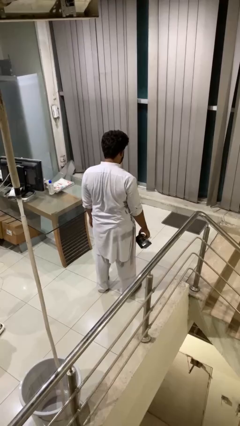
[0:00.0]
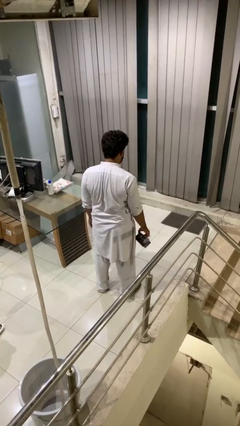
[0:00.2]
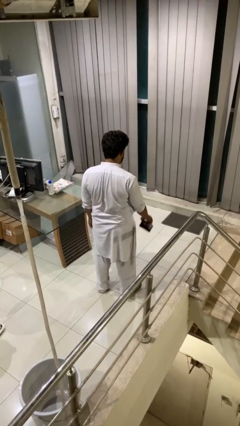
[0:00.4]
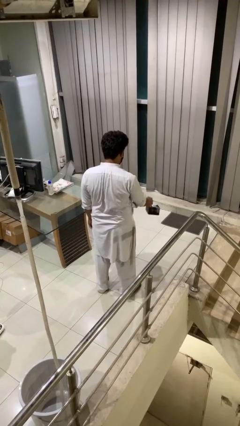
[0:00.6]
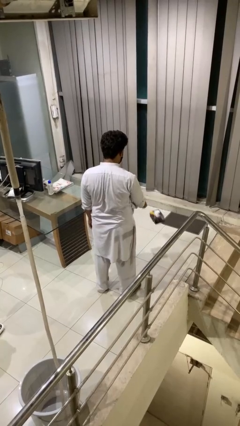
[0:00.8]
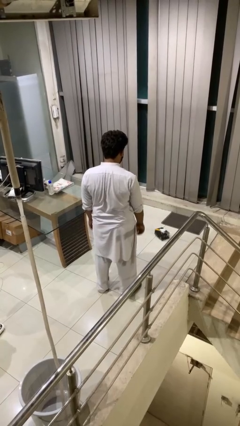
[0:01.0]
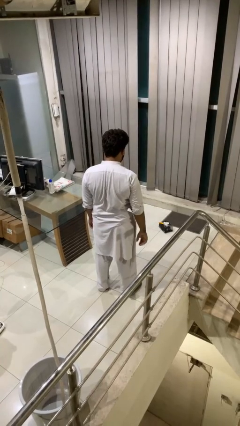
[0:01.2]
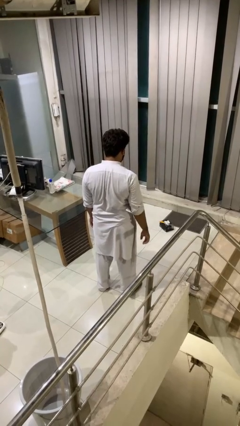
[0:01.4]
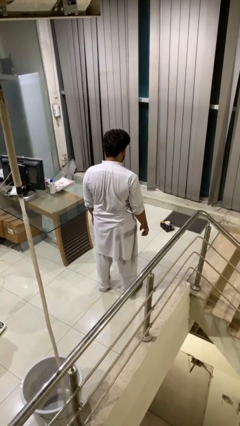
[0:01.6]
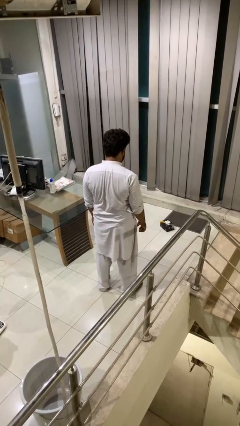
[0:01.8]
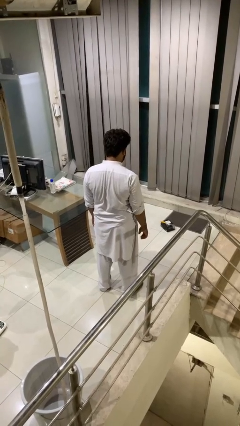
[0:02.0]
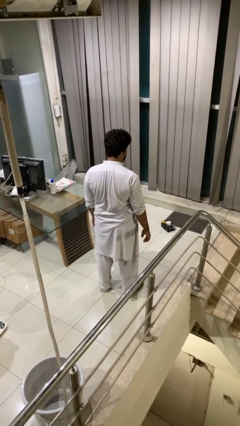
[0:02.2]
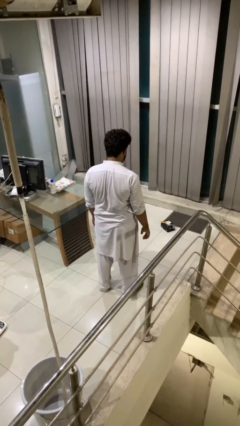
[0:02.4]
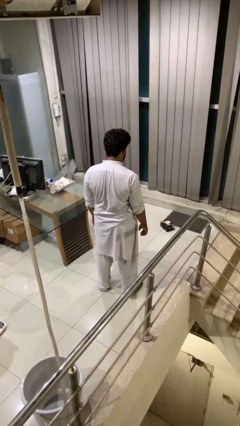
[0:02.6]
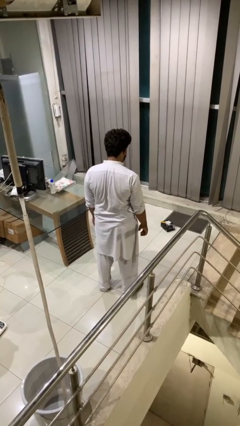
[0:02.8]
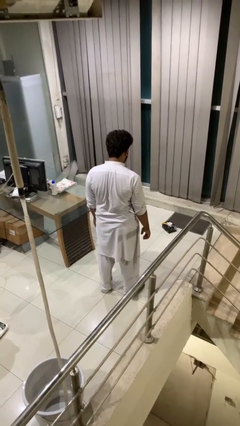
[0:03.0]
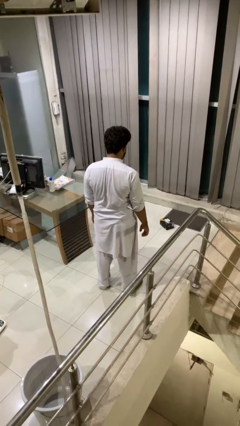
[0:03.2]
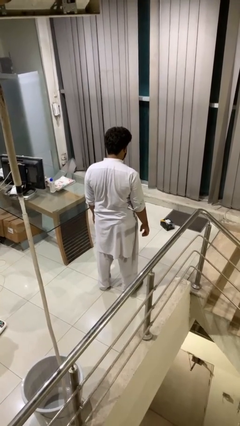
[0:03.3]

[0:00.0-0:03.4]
person throws object to ground

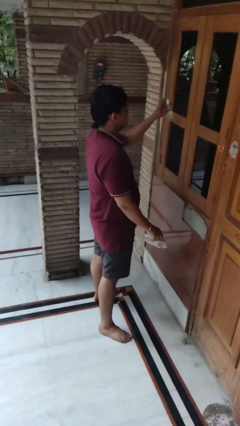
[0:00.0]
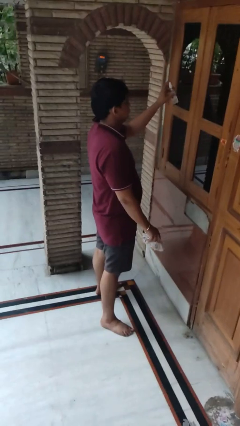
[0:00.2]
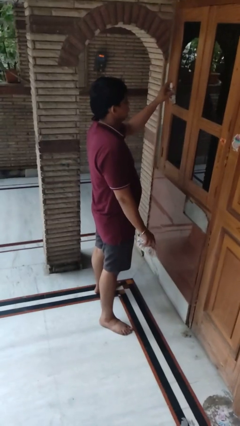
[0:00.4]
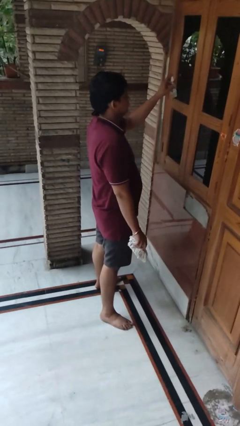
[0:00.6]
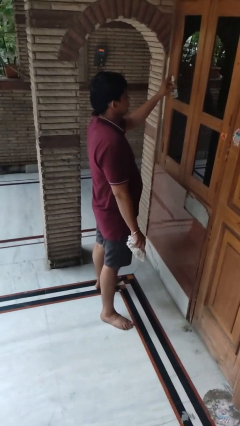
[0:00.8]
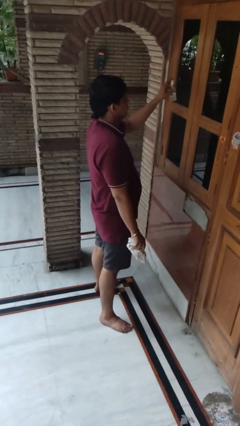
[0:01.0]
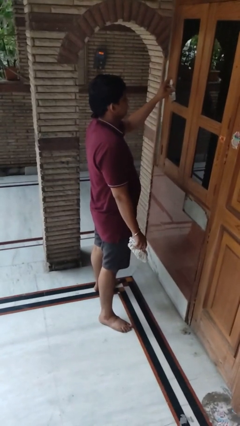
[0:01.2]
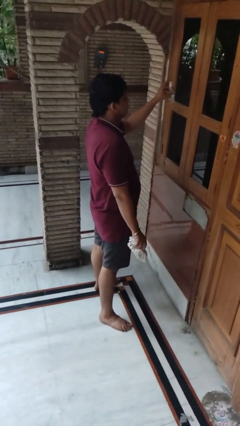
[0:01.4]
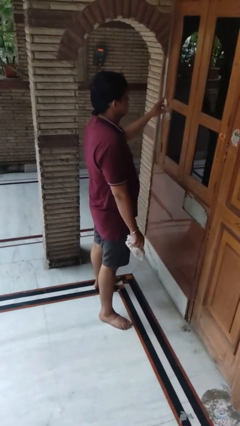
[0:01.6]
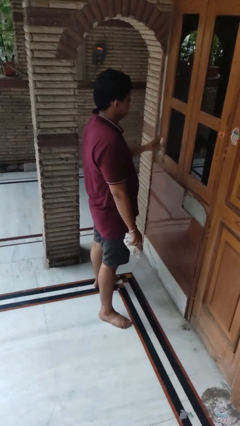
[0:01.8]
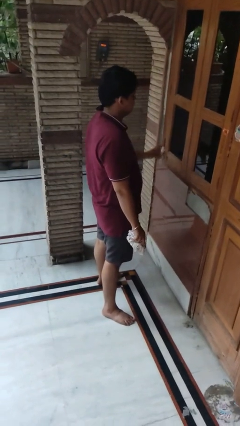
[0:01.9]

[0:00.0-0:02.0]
person sprays from bottle

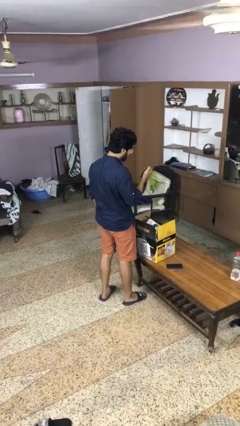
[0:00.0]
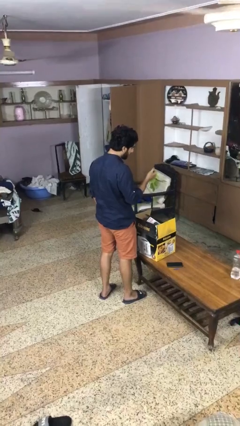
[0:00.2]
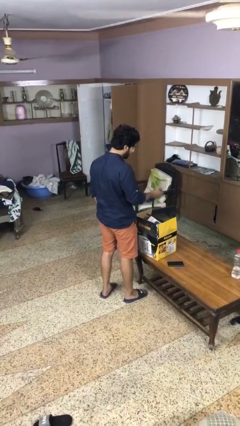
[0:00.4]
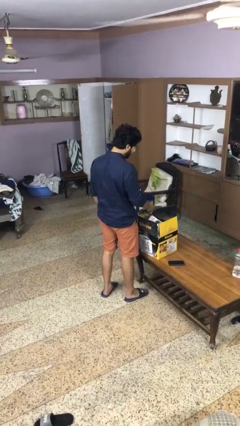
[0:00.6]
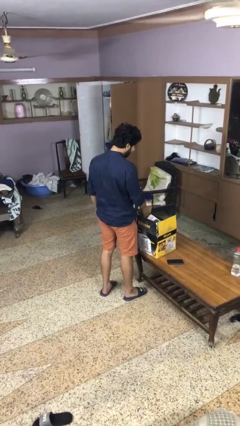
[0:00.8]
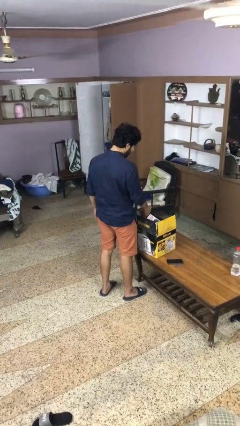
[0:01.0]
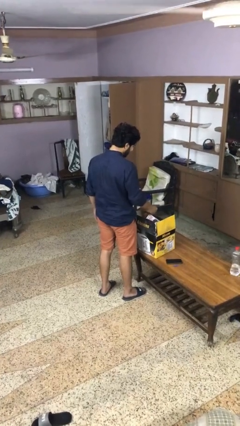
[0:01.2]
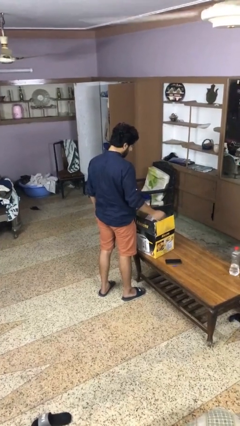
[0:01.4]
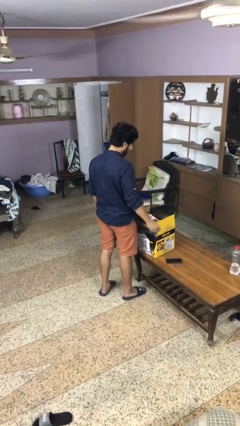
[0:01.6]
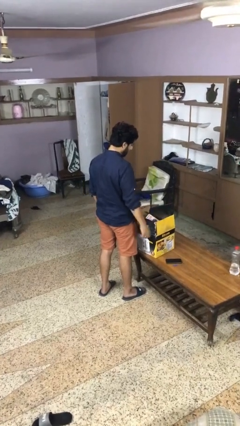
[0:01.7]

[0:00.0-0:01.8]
person puts object into box

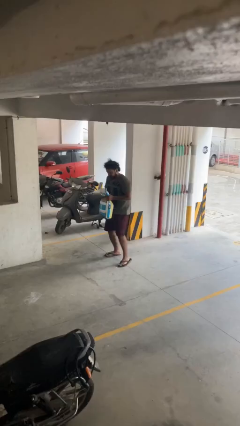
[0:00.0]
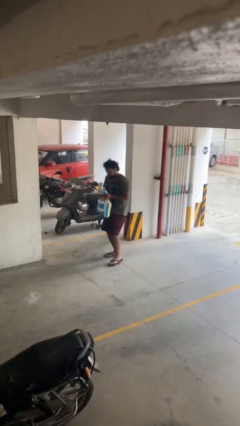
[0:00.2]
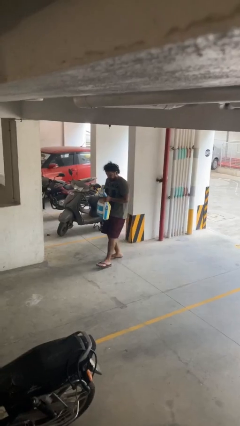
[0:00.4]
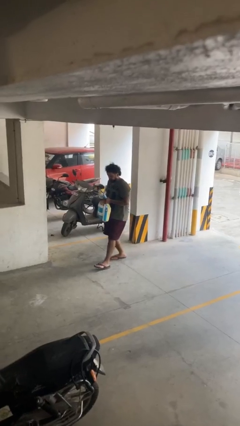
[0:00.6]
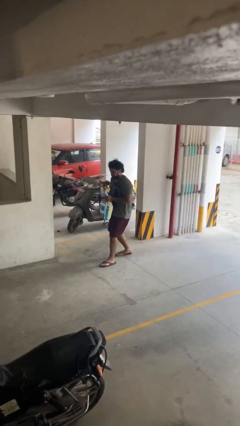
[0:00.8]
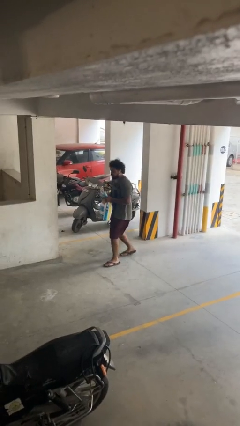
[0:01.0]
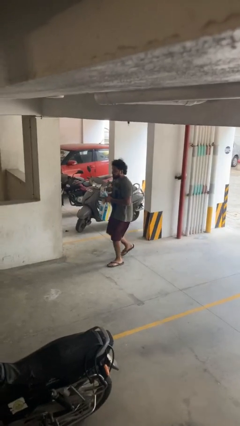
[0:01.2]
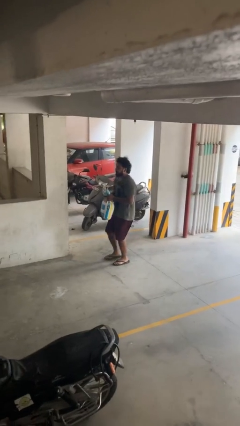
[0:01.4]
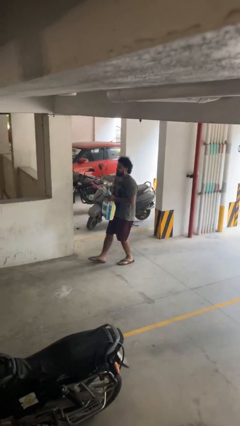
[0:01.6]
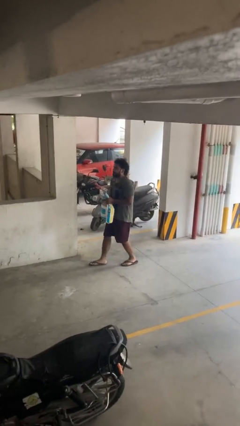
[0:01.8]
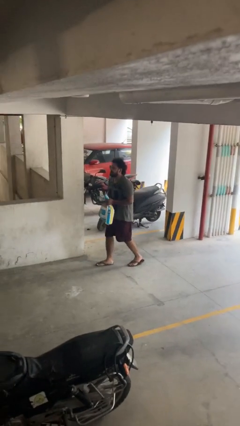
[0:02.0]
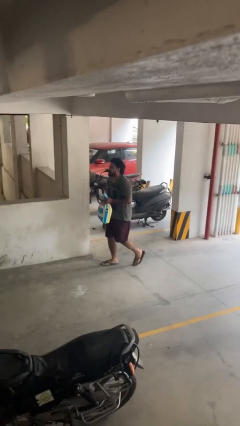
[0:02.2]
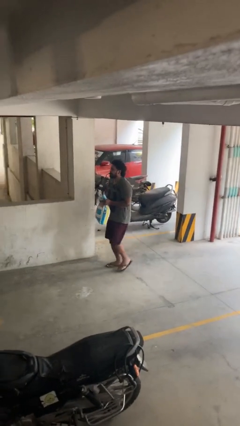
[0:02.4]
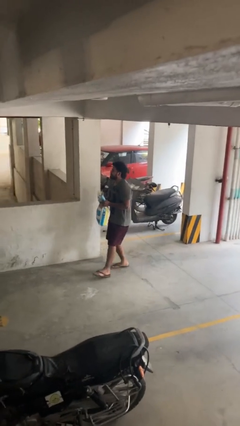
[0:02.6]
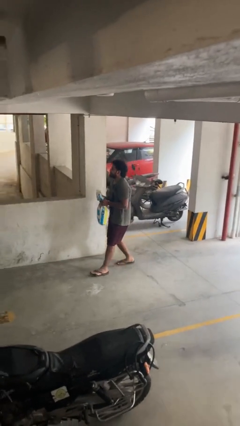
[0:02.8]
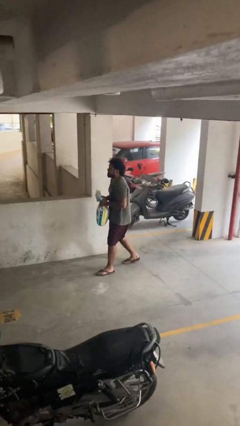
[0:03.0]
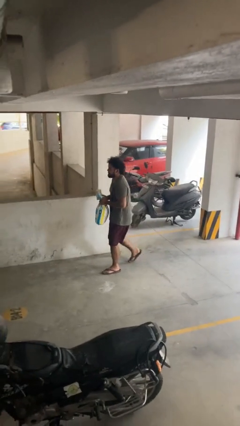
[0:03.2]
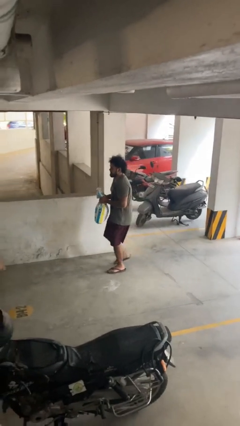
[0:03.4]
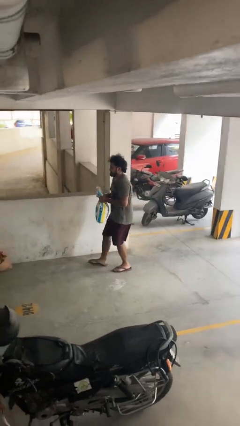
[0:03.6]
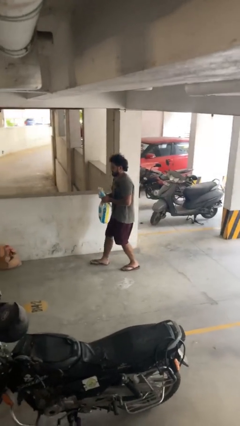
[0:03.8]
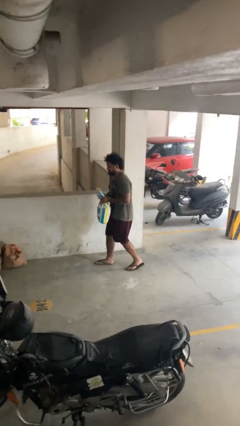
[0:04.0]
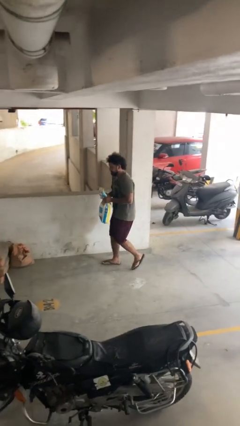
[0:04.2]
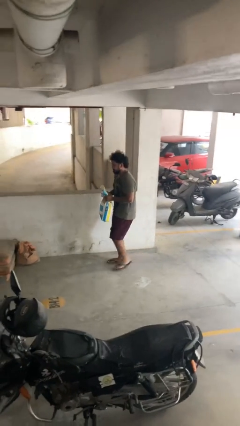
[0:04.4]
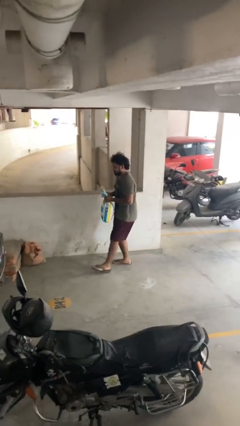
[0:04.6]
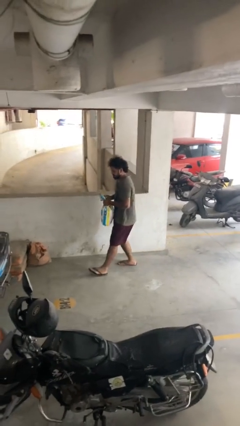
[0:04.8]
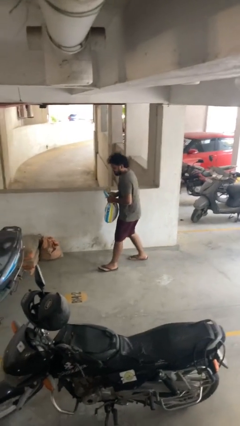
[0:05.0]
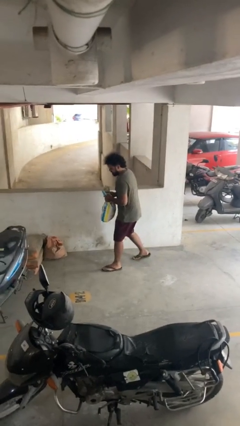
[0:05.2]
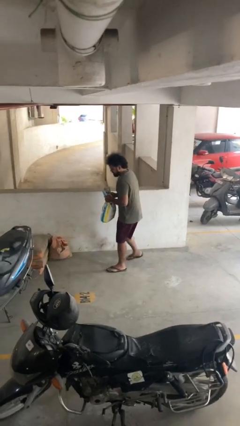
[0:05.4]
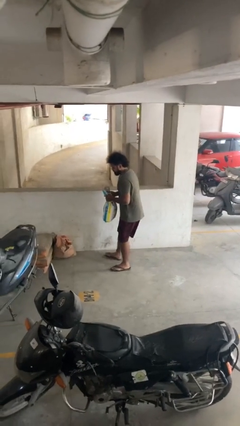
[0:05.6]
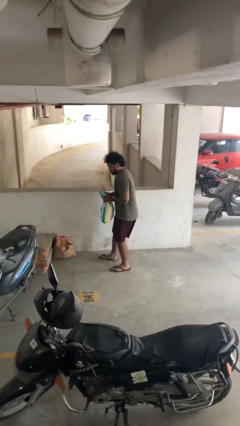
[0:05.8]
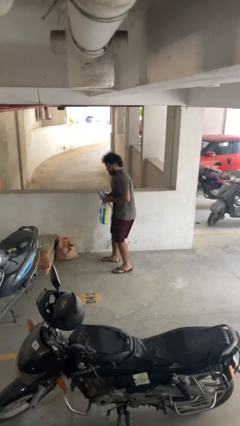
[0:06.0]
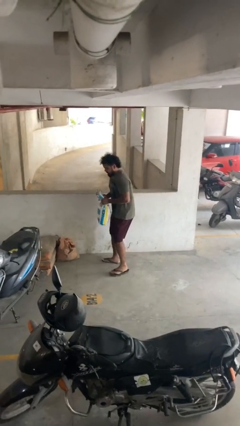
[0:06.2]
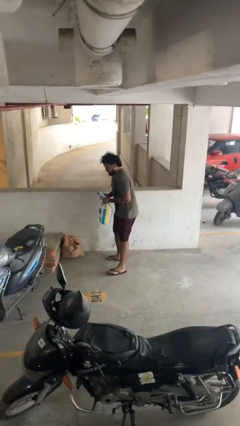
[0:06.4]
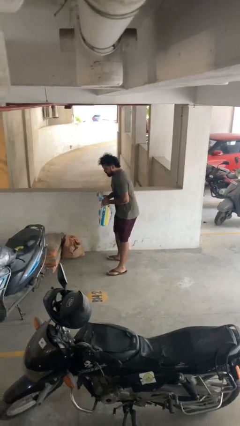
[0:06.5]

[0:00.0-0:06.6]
person carries heavy object

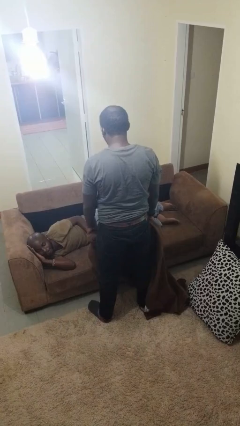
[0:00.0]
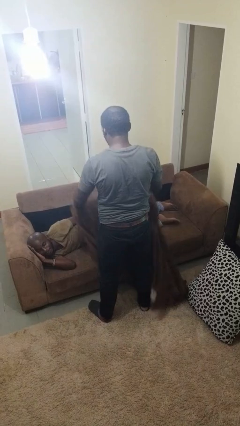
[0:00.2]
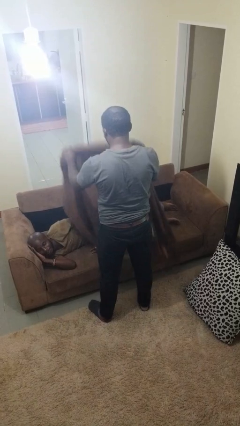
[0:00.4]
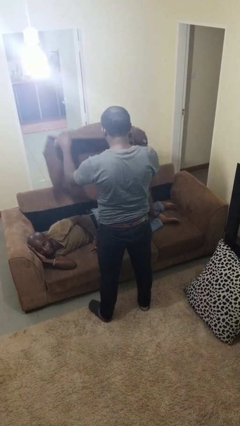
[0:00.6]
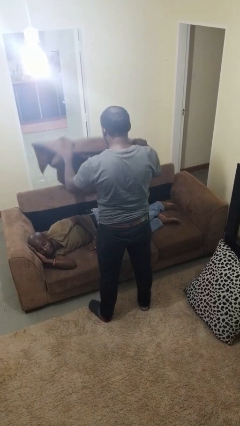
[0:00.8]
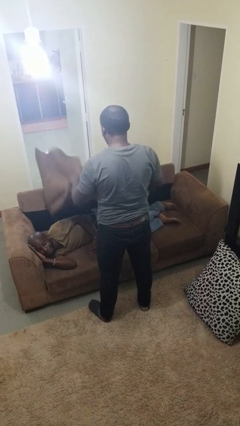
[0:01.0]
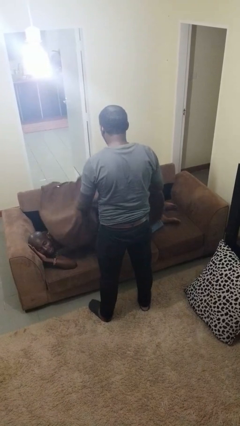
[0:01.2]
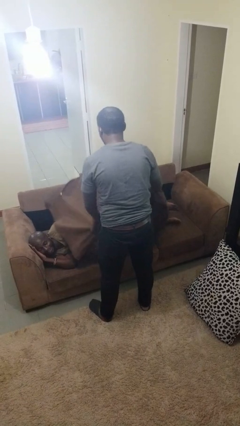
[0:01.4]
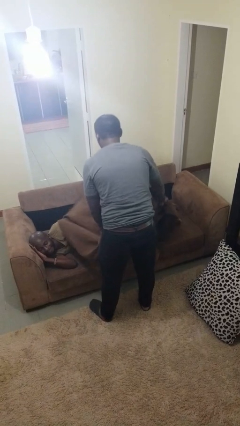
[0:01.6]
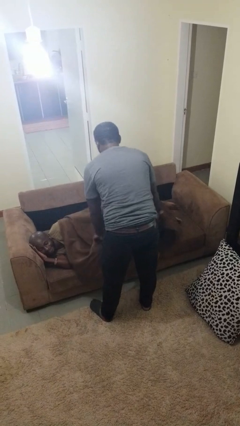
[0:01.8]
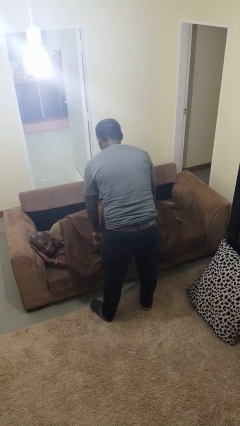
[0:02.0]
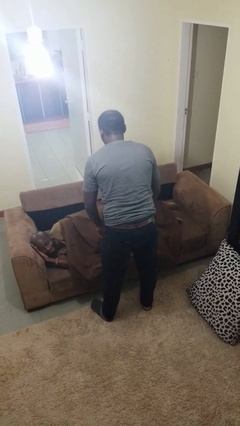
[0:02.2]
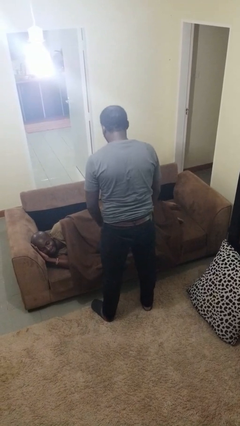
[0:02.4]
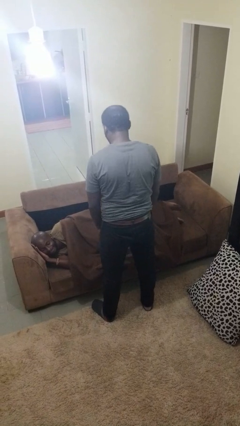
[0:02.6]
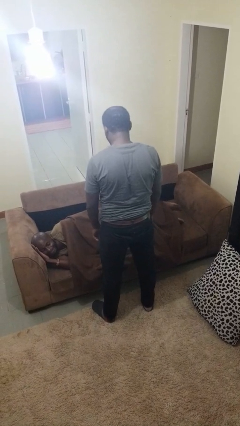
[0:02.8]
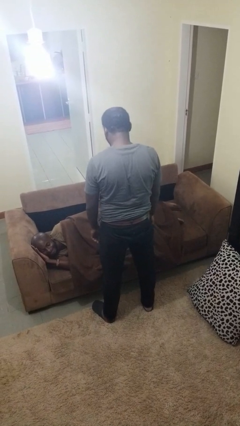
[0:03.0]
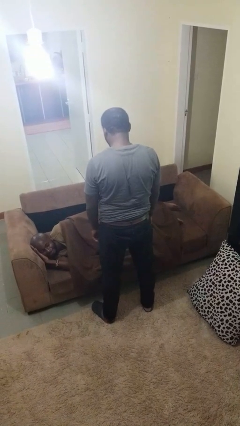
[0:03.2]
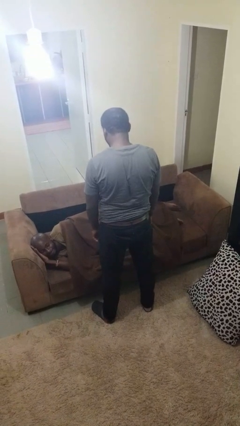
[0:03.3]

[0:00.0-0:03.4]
person covers friend with blanket

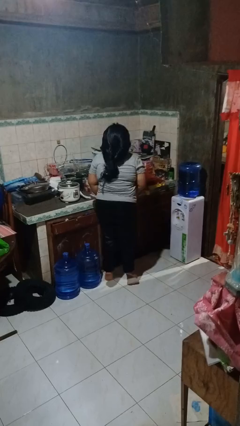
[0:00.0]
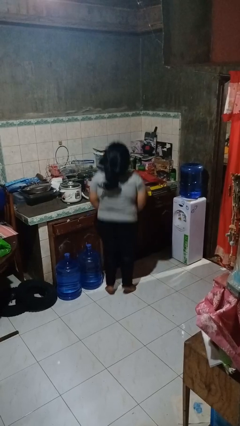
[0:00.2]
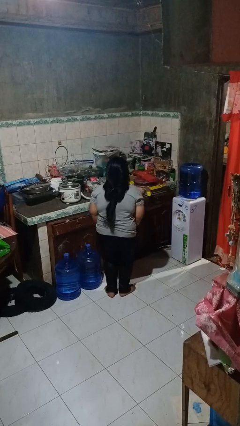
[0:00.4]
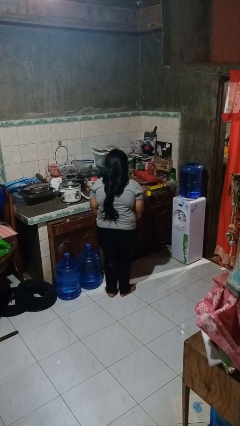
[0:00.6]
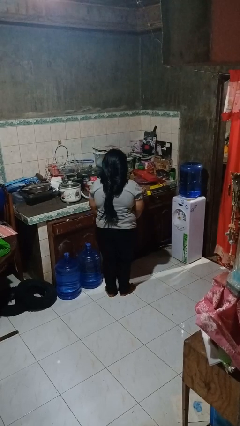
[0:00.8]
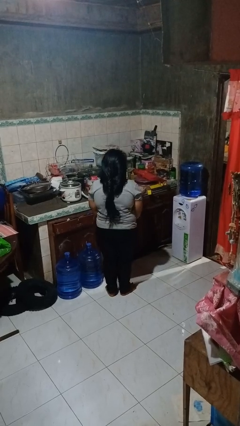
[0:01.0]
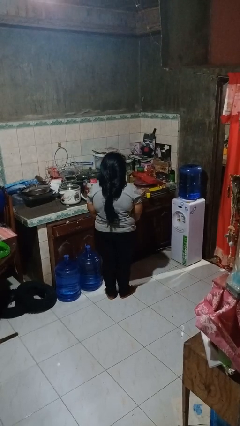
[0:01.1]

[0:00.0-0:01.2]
person jumps
